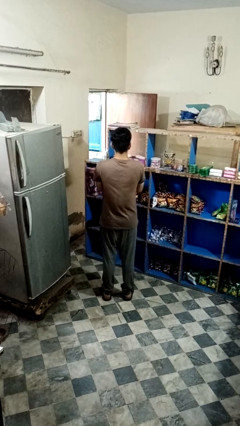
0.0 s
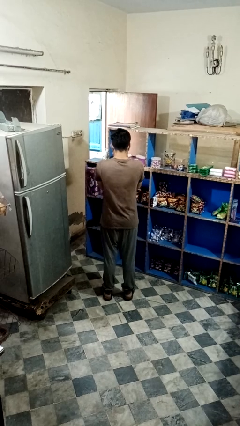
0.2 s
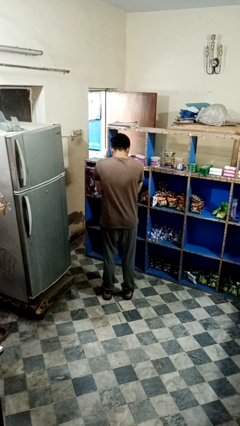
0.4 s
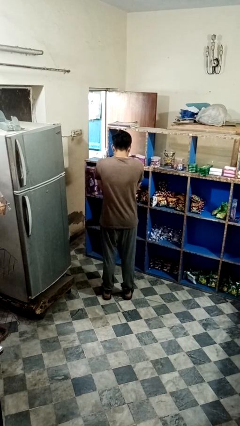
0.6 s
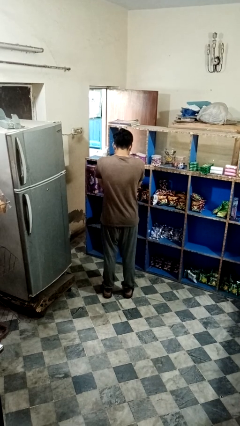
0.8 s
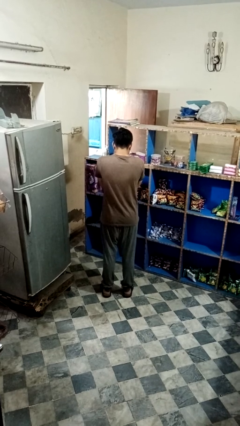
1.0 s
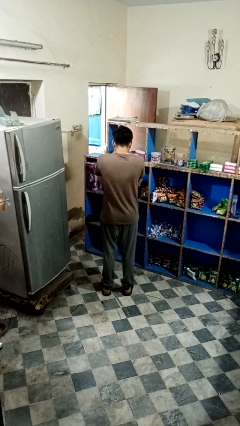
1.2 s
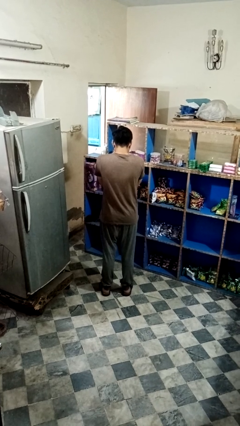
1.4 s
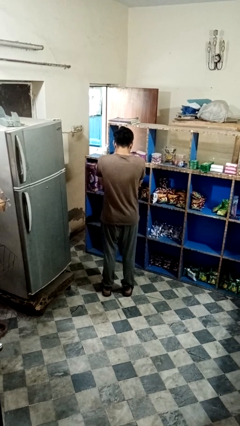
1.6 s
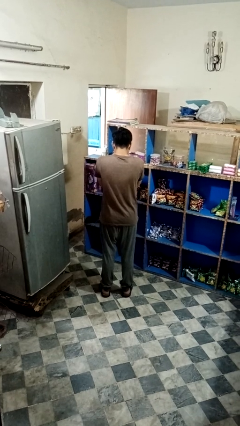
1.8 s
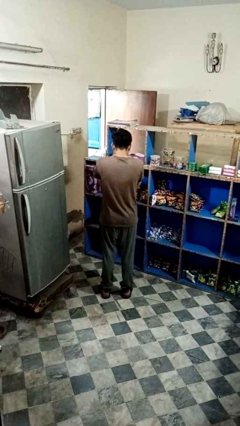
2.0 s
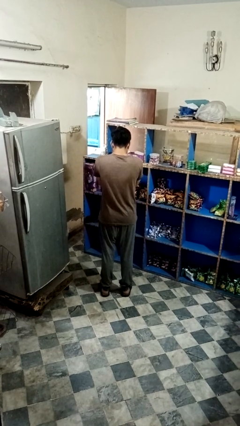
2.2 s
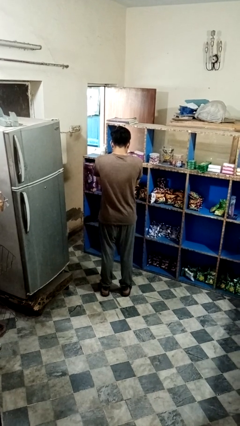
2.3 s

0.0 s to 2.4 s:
person sneezes into hand

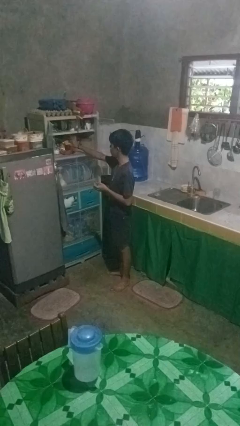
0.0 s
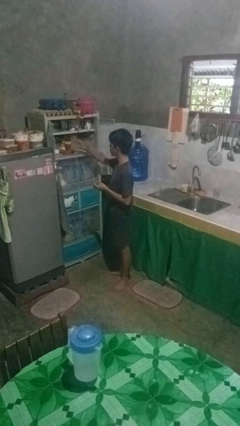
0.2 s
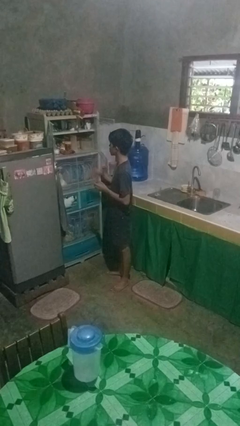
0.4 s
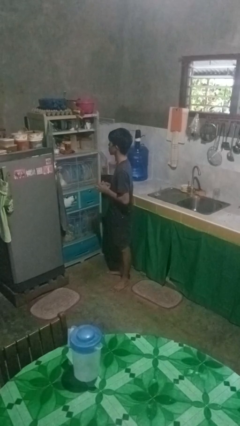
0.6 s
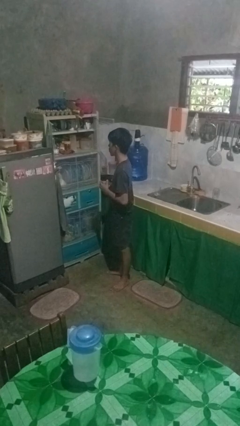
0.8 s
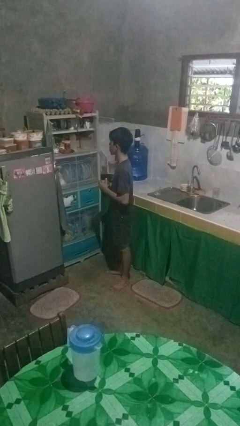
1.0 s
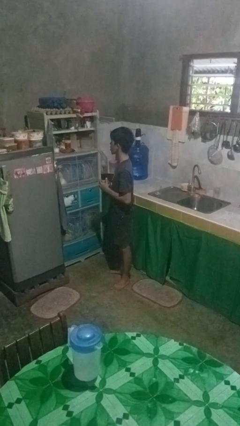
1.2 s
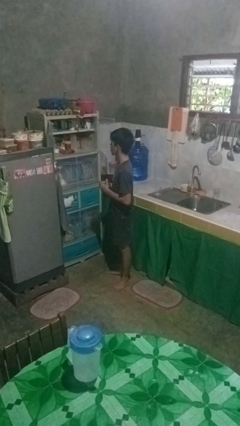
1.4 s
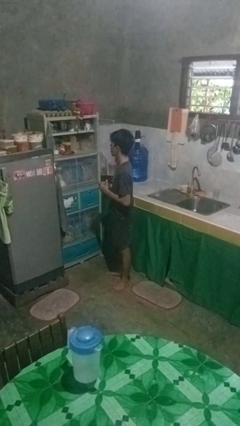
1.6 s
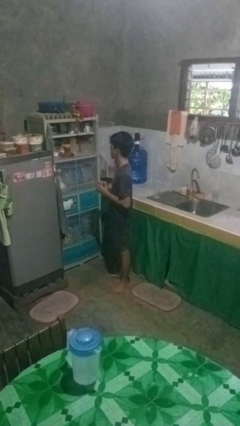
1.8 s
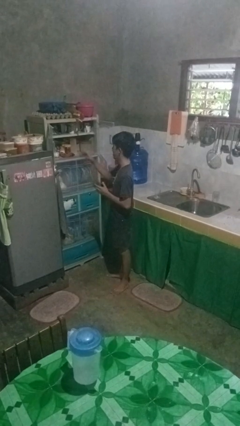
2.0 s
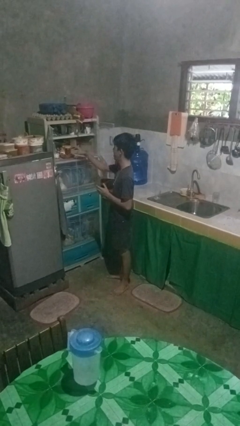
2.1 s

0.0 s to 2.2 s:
person puts object in cabinet

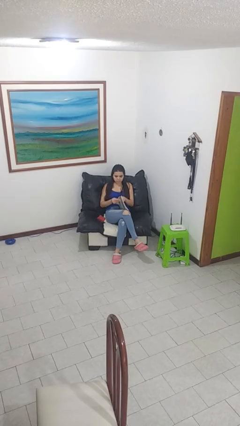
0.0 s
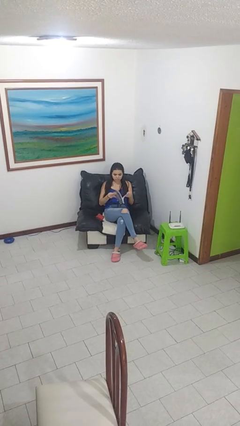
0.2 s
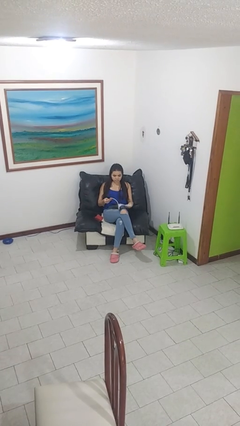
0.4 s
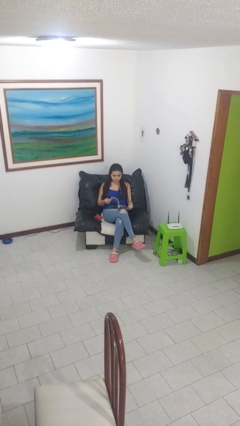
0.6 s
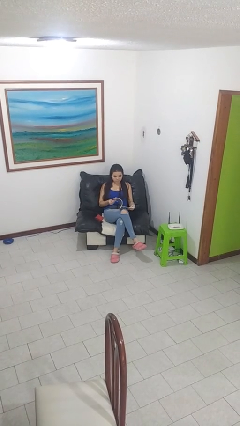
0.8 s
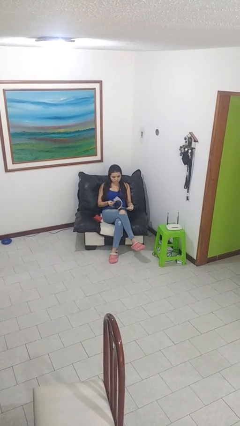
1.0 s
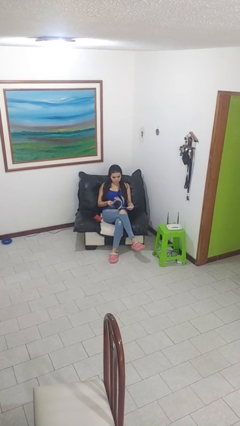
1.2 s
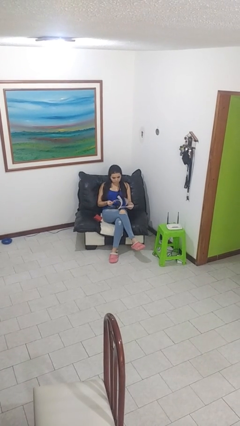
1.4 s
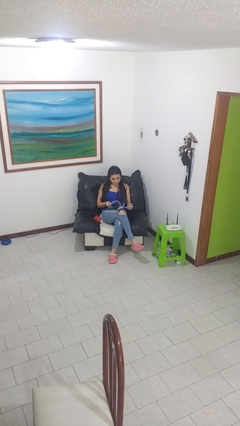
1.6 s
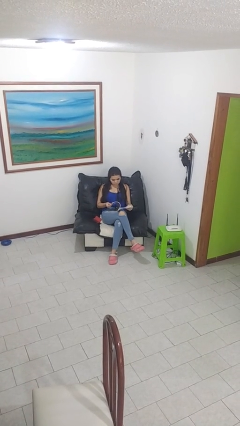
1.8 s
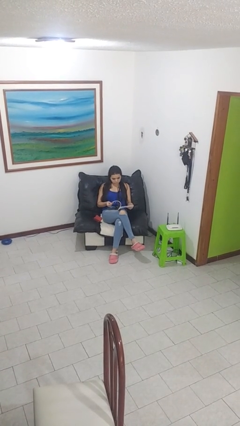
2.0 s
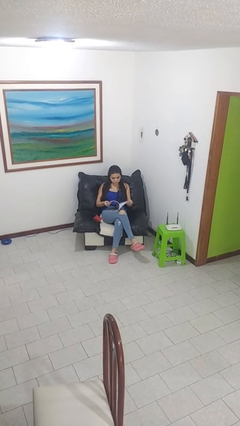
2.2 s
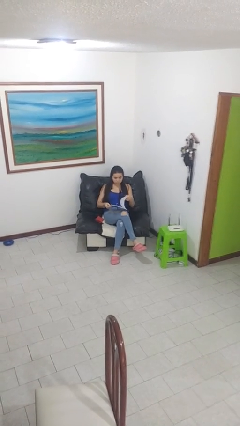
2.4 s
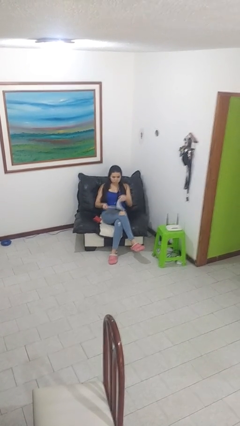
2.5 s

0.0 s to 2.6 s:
person reads magazine

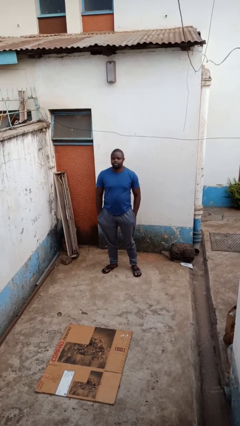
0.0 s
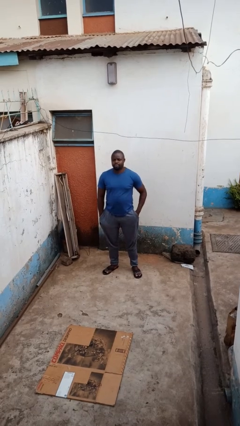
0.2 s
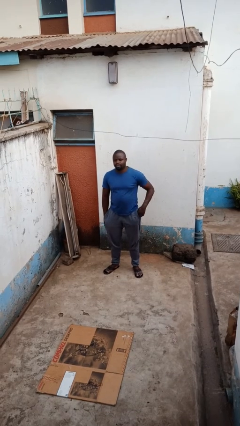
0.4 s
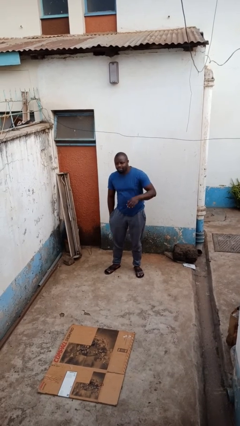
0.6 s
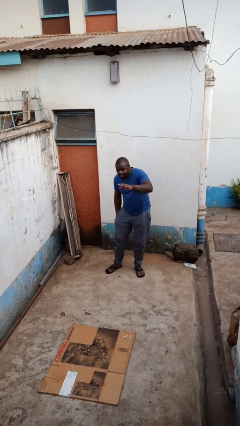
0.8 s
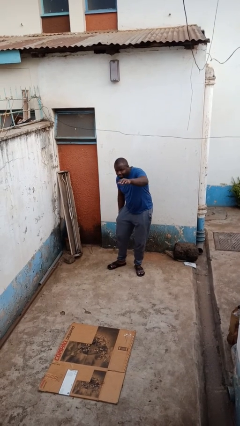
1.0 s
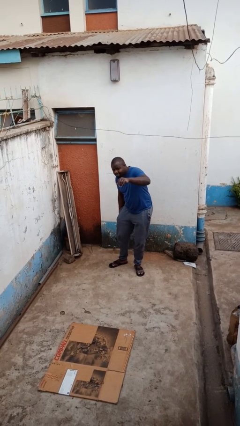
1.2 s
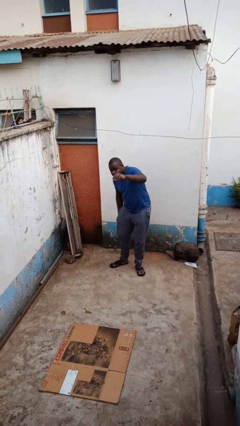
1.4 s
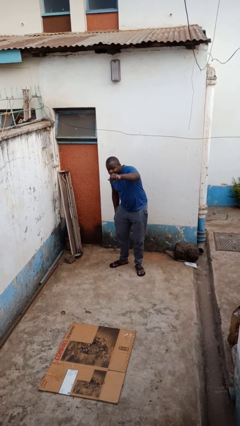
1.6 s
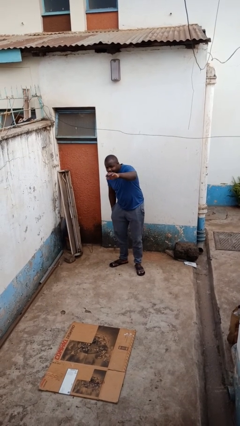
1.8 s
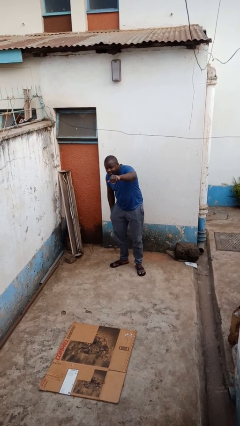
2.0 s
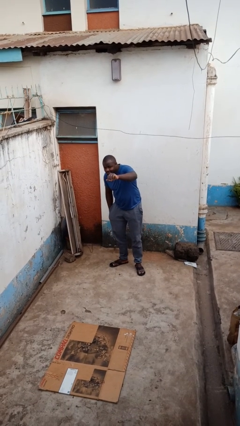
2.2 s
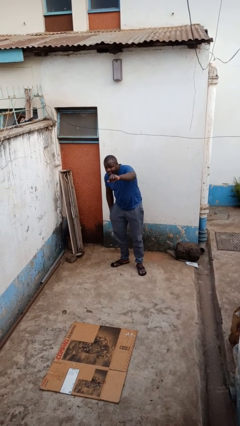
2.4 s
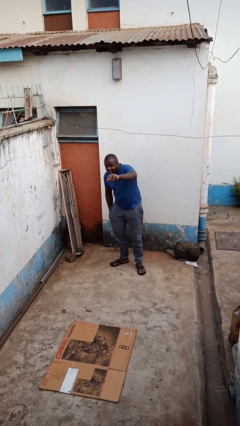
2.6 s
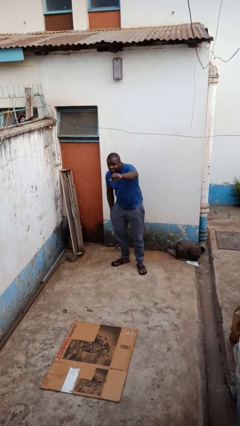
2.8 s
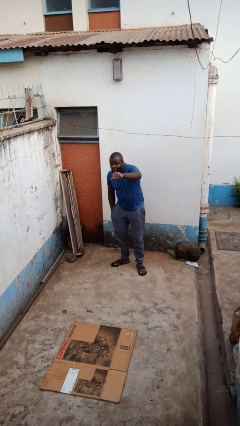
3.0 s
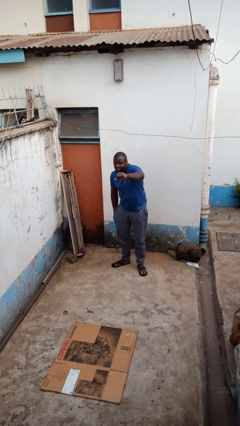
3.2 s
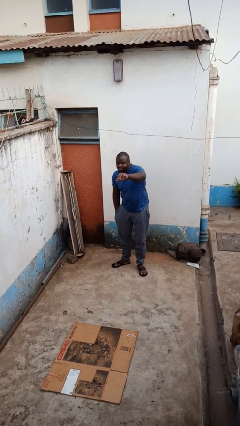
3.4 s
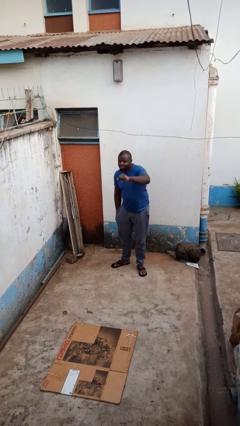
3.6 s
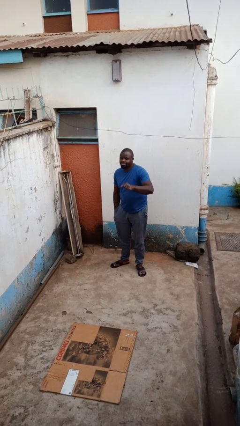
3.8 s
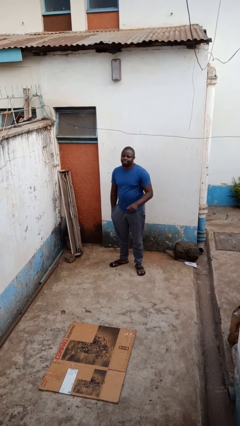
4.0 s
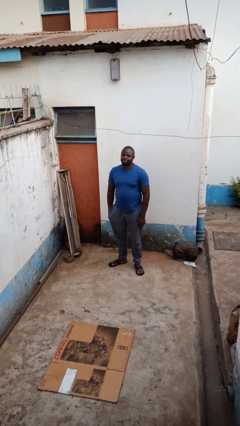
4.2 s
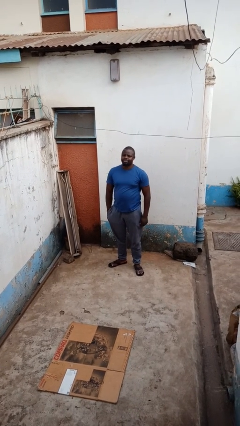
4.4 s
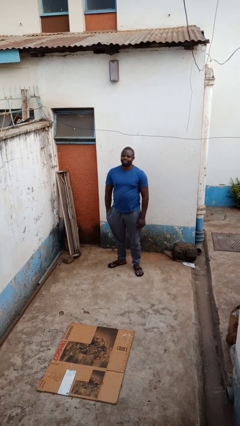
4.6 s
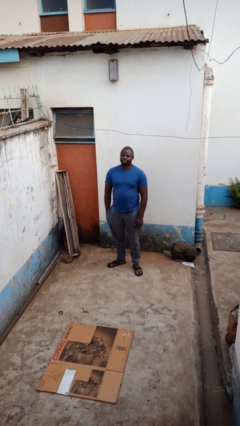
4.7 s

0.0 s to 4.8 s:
person gestures come here

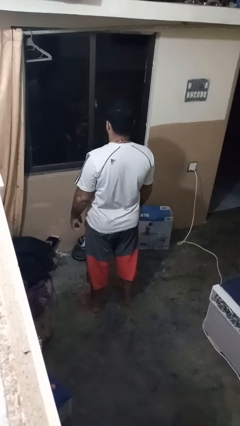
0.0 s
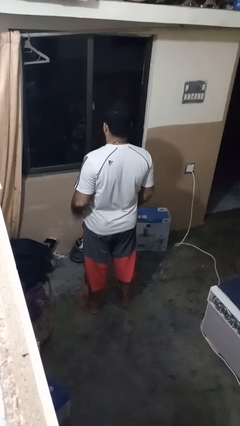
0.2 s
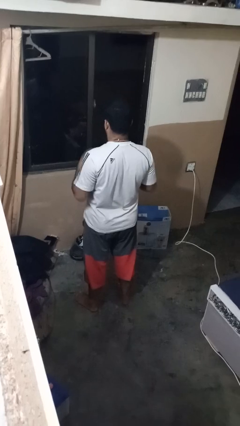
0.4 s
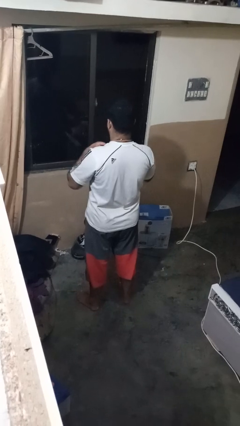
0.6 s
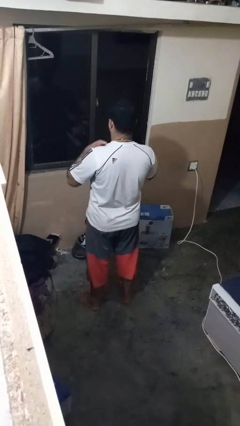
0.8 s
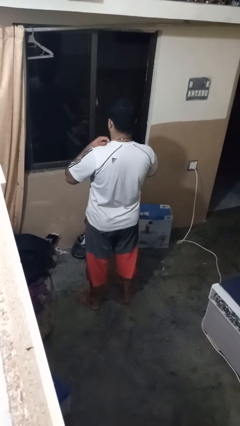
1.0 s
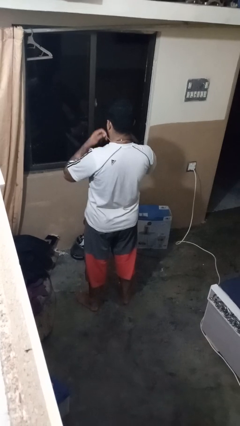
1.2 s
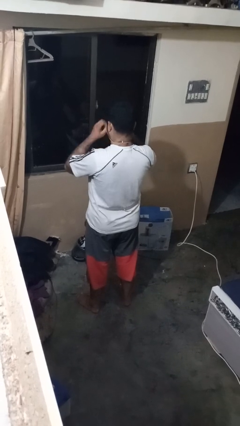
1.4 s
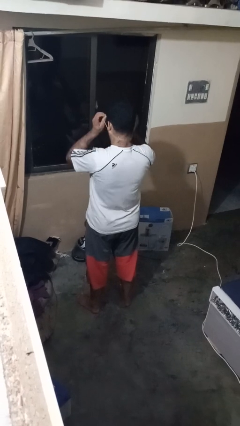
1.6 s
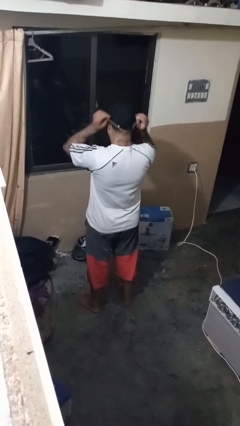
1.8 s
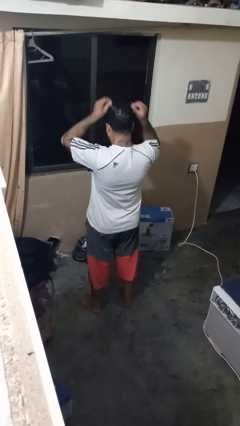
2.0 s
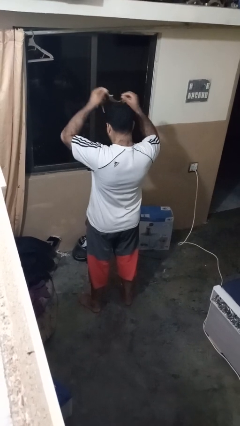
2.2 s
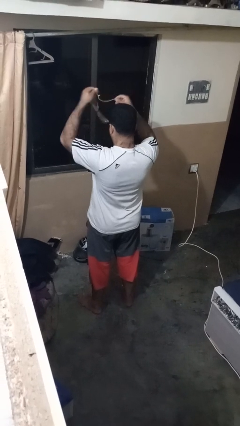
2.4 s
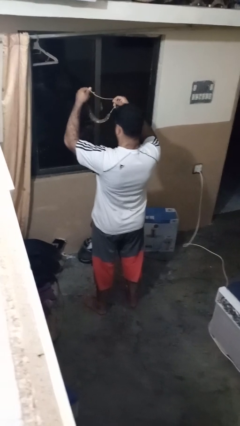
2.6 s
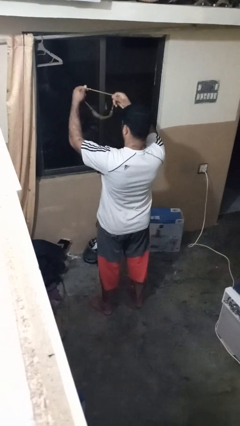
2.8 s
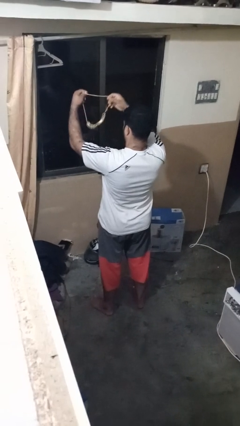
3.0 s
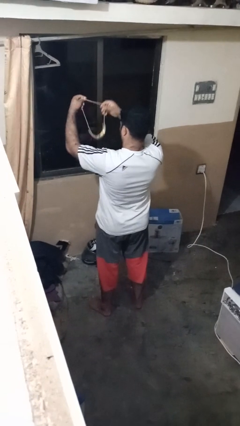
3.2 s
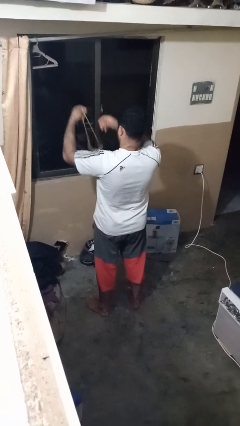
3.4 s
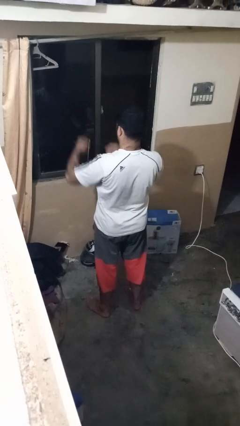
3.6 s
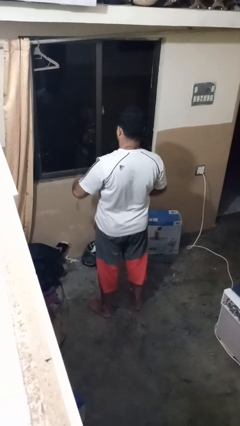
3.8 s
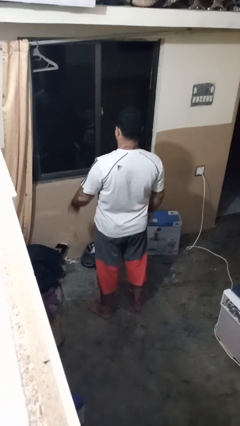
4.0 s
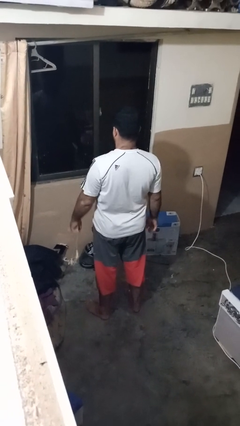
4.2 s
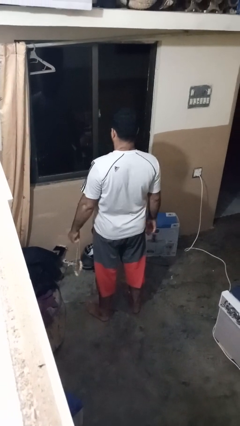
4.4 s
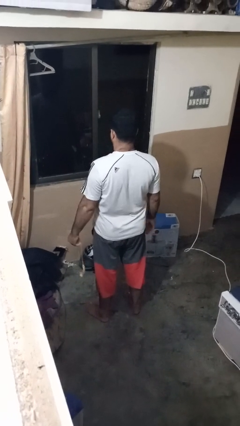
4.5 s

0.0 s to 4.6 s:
person takes off necklace

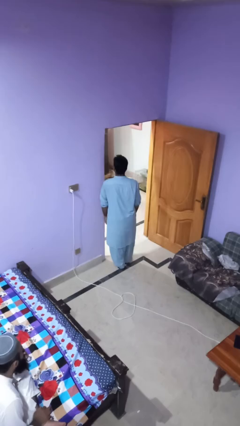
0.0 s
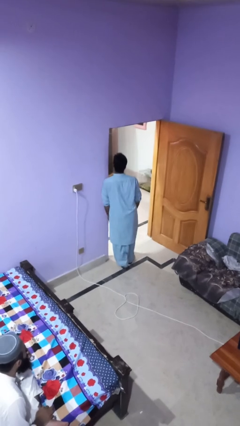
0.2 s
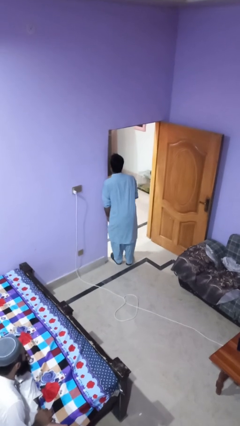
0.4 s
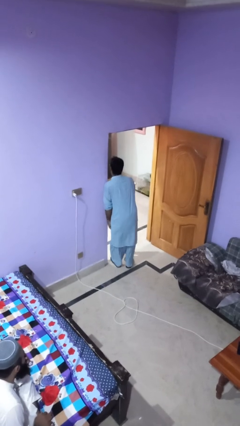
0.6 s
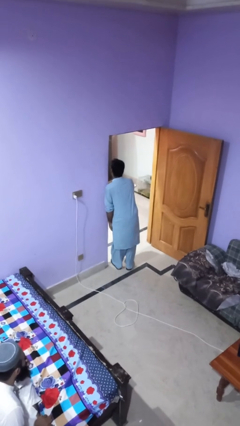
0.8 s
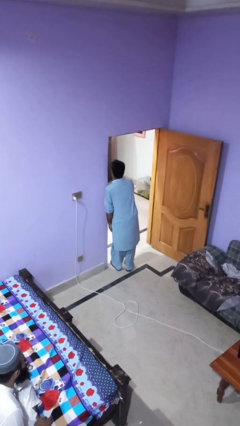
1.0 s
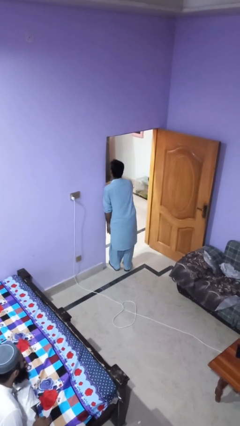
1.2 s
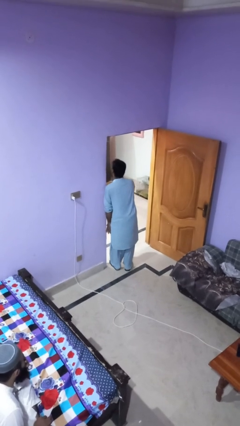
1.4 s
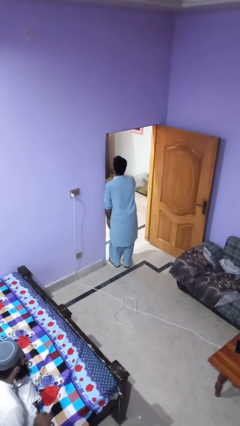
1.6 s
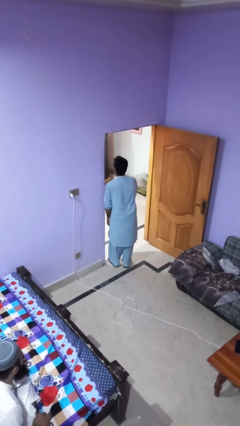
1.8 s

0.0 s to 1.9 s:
person bumps into wall
